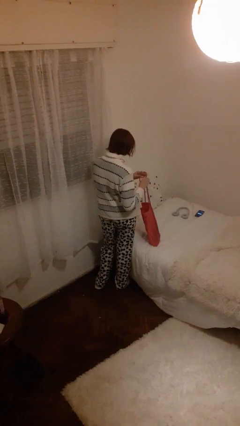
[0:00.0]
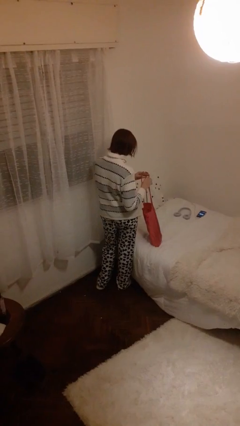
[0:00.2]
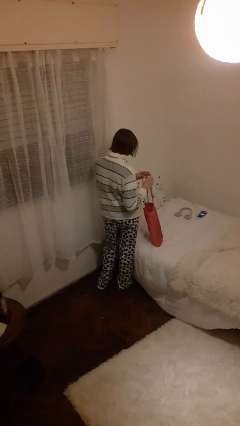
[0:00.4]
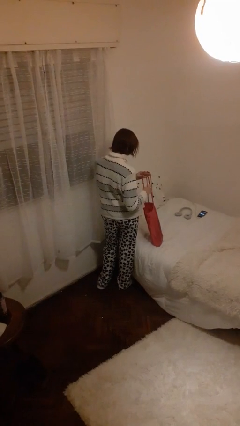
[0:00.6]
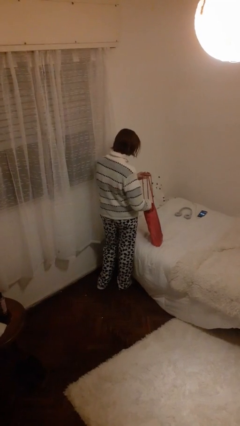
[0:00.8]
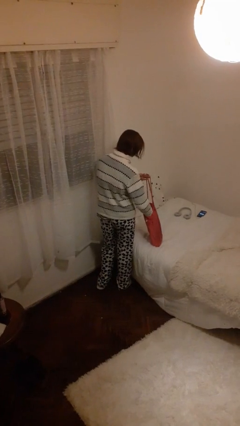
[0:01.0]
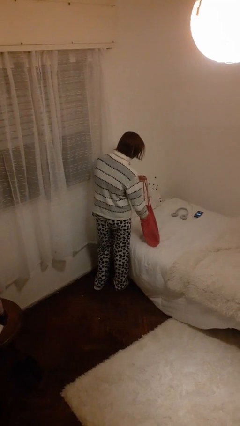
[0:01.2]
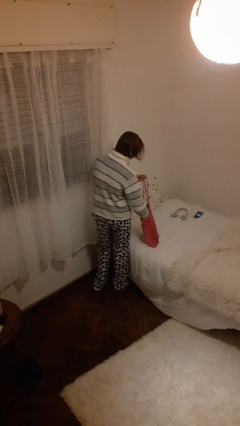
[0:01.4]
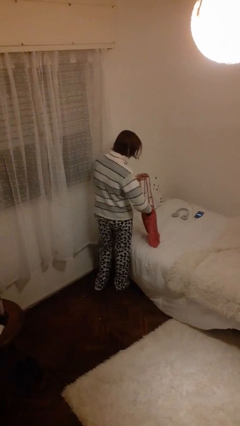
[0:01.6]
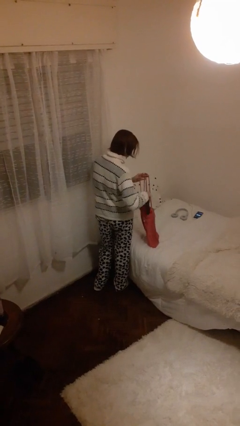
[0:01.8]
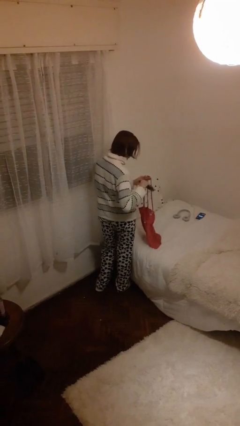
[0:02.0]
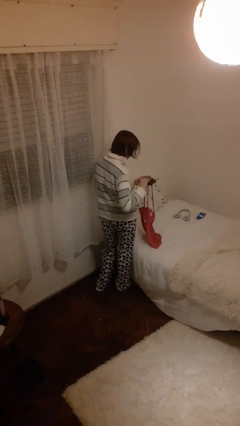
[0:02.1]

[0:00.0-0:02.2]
person takes object from bag

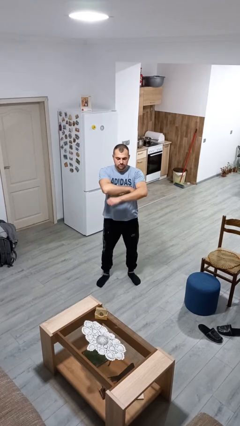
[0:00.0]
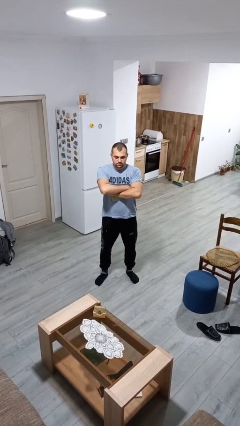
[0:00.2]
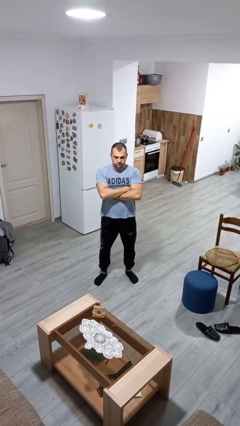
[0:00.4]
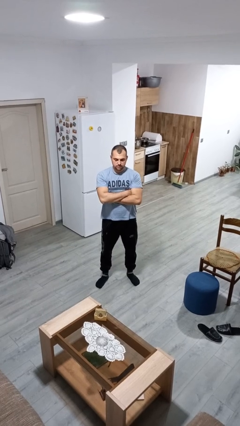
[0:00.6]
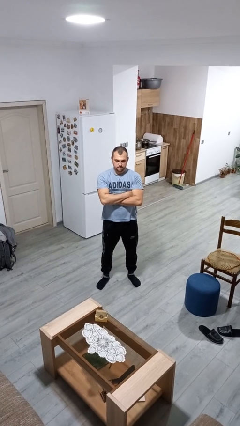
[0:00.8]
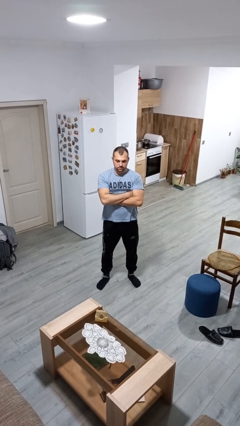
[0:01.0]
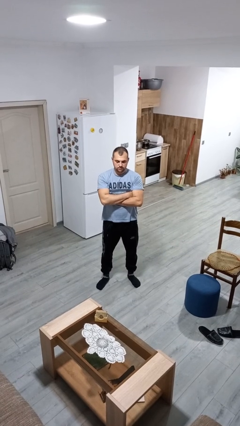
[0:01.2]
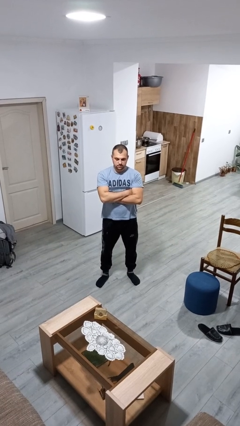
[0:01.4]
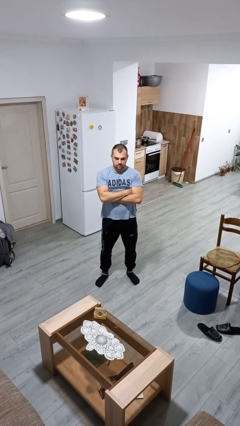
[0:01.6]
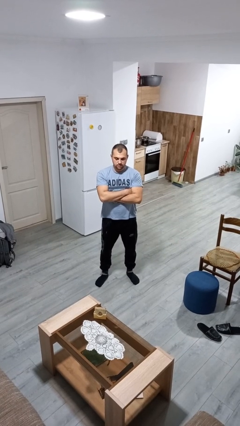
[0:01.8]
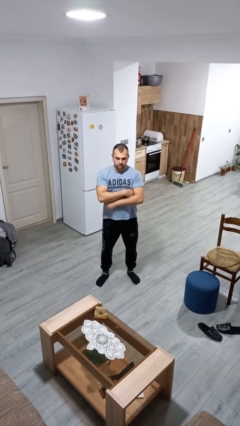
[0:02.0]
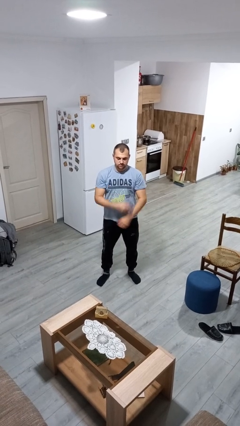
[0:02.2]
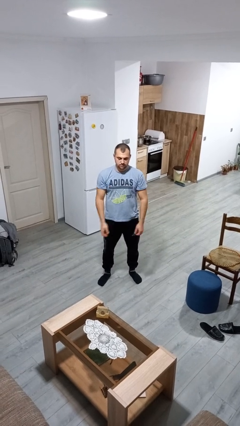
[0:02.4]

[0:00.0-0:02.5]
person crosses arms

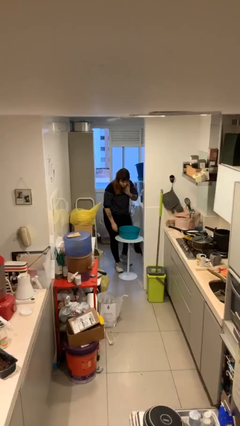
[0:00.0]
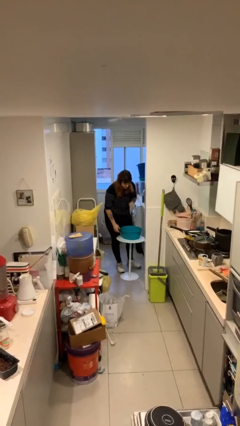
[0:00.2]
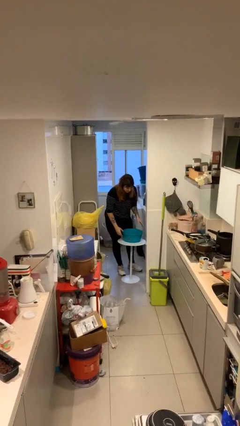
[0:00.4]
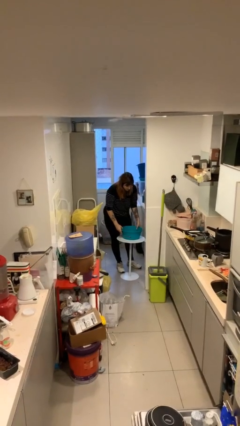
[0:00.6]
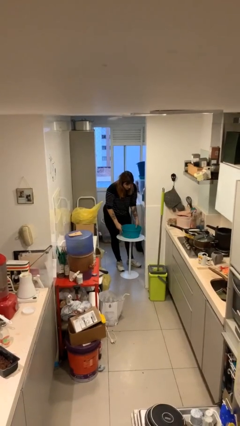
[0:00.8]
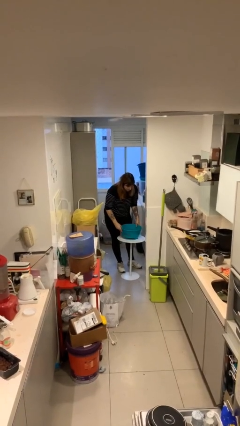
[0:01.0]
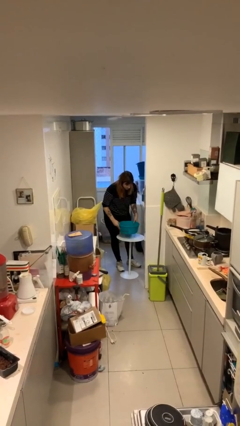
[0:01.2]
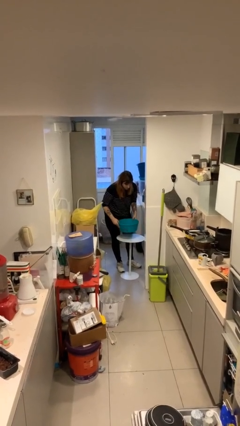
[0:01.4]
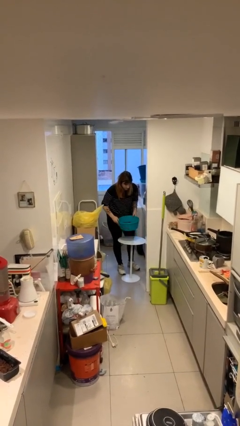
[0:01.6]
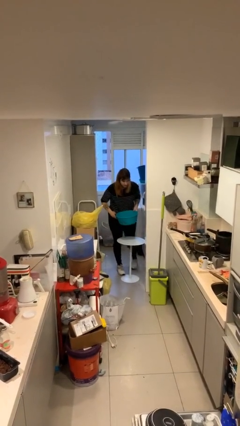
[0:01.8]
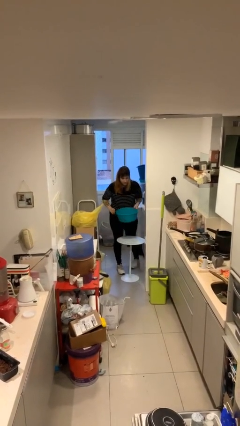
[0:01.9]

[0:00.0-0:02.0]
person picks up object from table

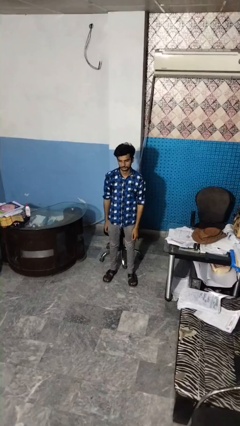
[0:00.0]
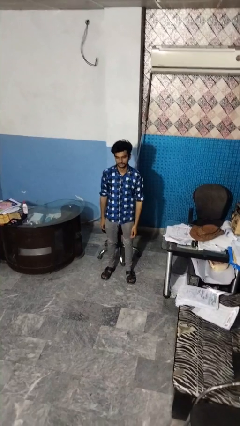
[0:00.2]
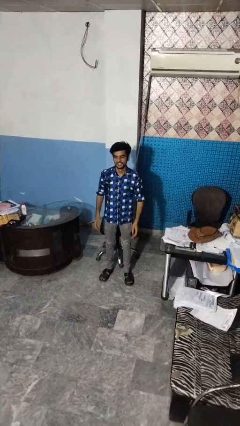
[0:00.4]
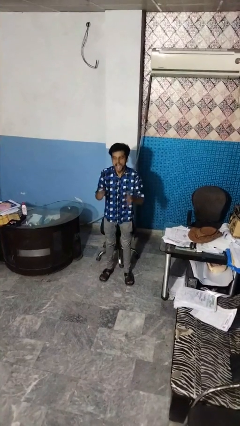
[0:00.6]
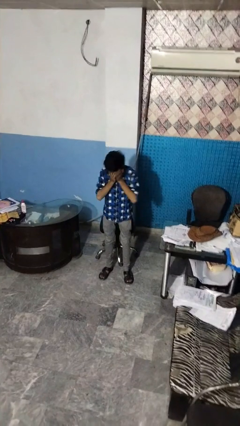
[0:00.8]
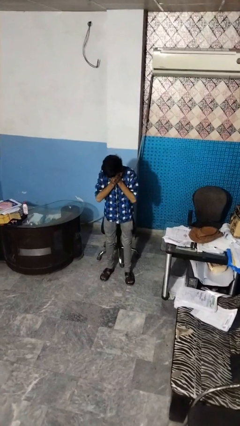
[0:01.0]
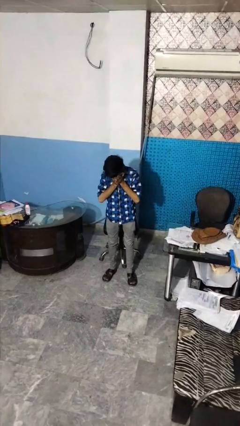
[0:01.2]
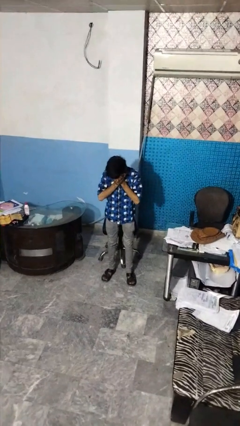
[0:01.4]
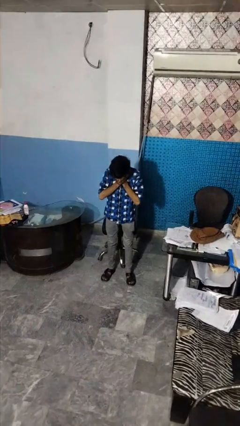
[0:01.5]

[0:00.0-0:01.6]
person sneezes into hand

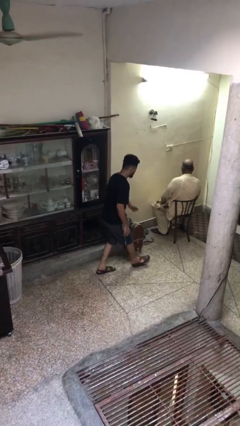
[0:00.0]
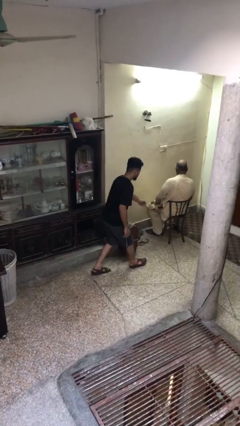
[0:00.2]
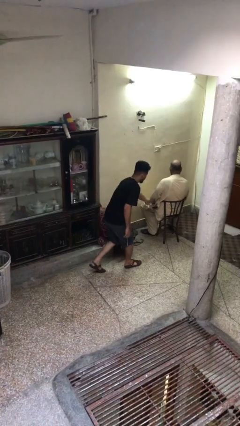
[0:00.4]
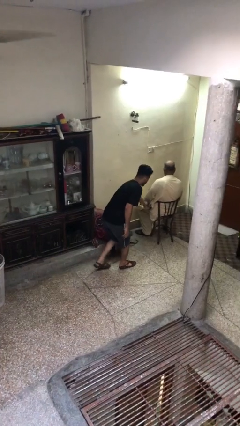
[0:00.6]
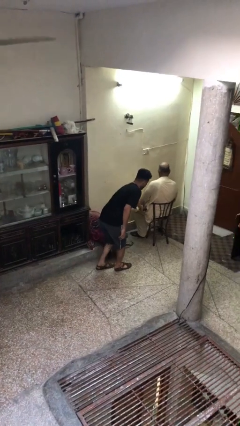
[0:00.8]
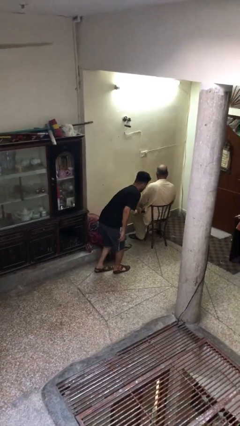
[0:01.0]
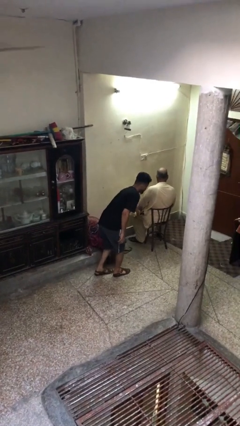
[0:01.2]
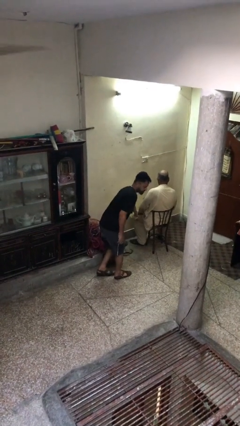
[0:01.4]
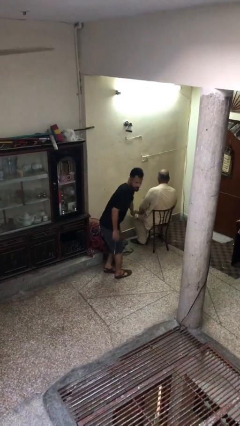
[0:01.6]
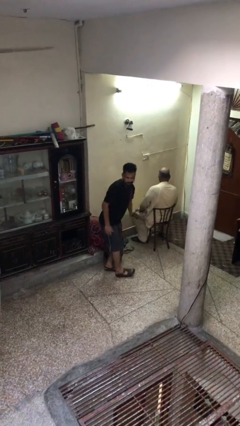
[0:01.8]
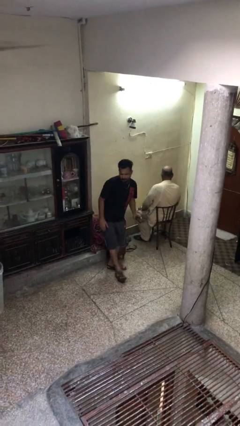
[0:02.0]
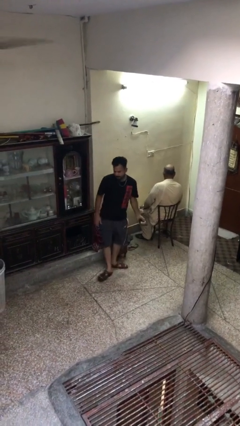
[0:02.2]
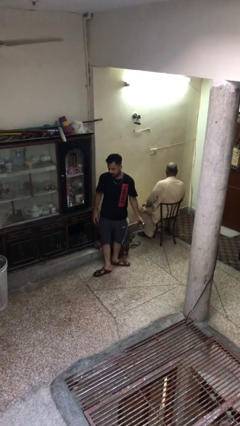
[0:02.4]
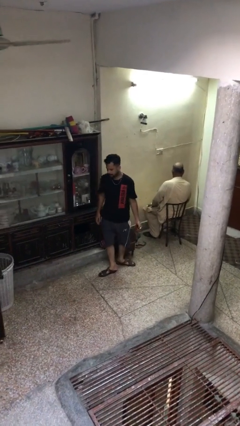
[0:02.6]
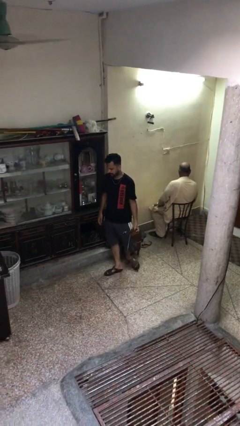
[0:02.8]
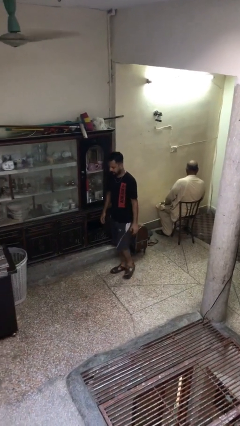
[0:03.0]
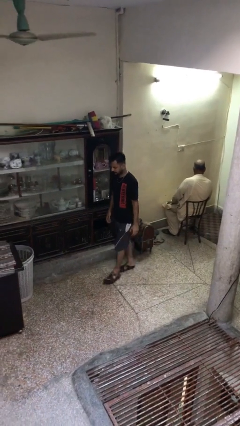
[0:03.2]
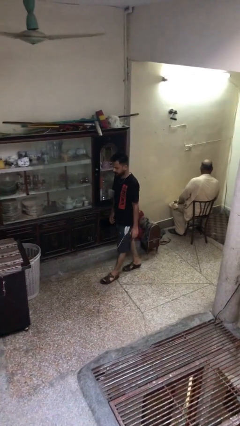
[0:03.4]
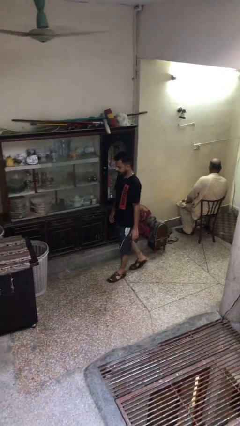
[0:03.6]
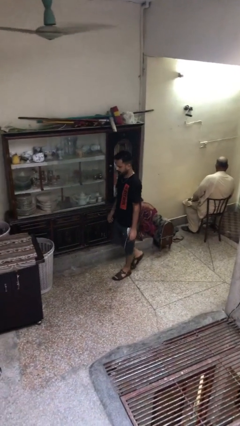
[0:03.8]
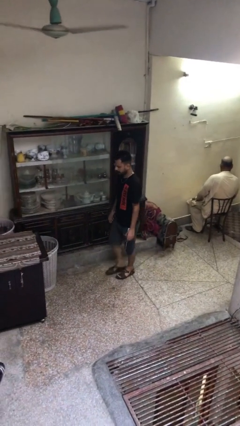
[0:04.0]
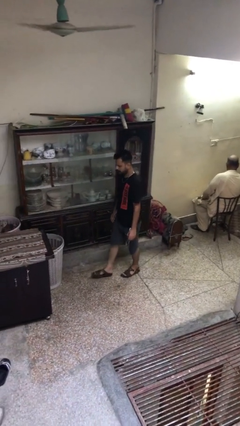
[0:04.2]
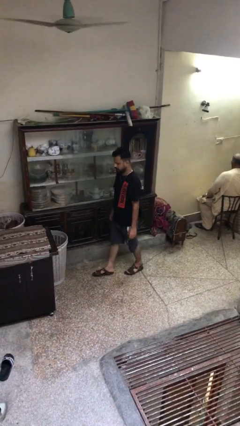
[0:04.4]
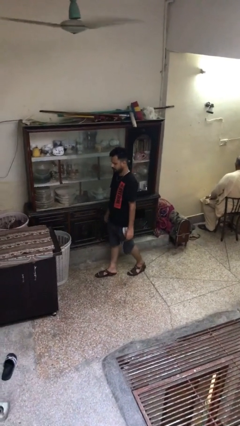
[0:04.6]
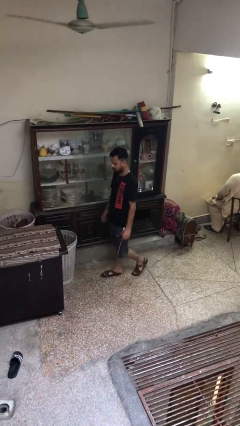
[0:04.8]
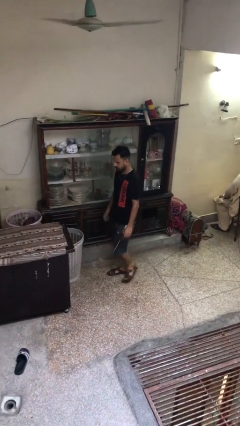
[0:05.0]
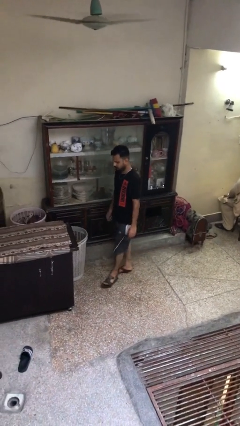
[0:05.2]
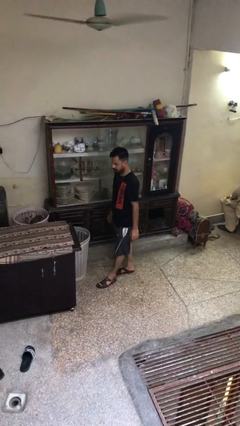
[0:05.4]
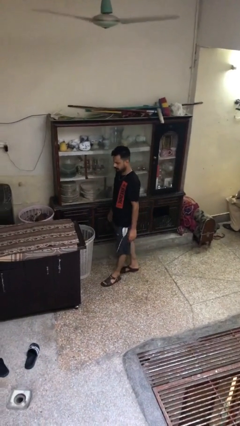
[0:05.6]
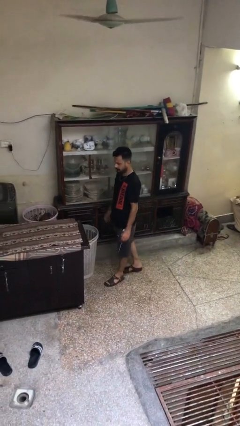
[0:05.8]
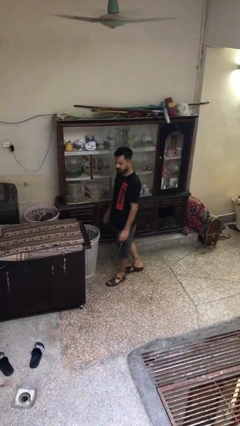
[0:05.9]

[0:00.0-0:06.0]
person steals object from person

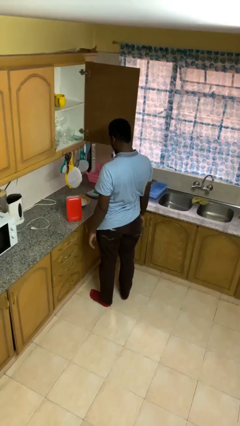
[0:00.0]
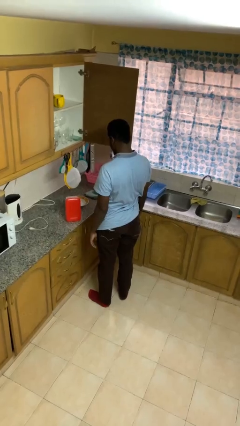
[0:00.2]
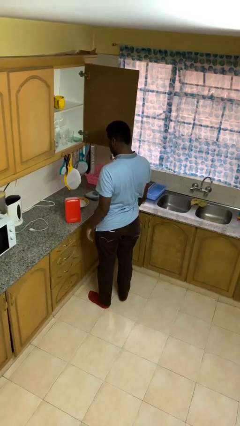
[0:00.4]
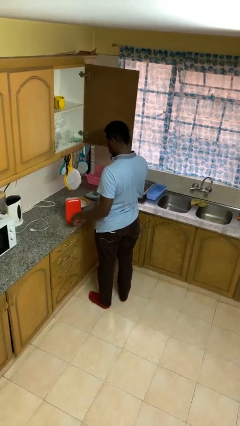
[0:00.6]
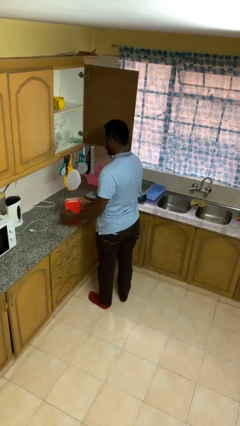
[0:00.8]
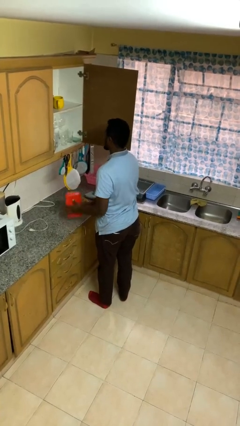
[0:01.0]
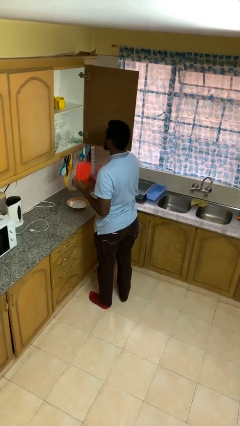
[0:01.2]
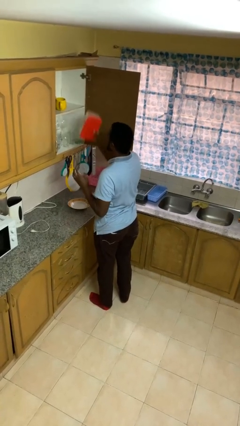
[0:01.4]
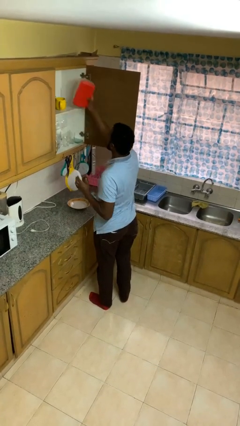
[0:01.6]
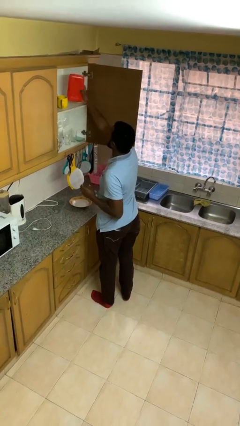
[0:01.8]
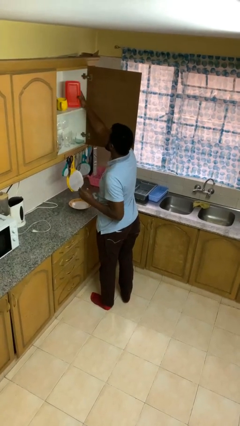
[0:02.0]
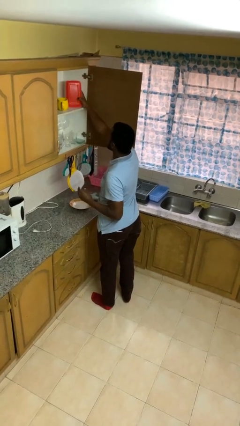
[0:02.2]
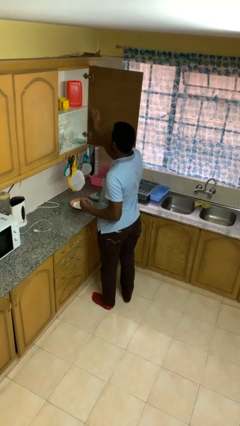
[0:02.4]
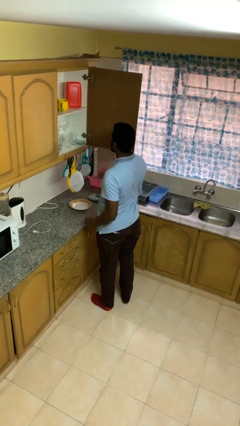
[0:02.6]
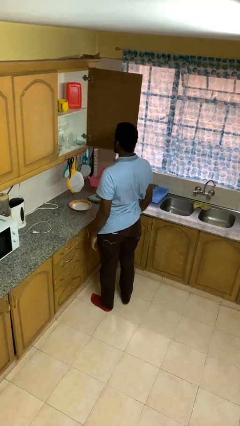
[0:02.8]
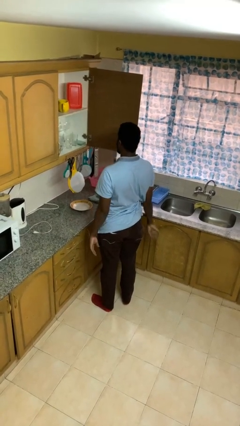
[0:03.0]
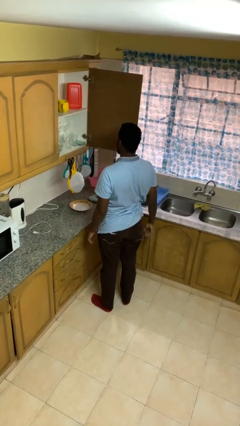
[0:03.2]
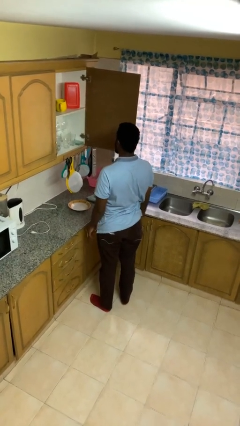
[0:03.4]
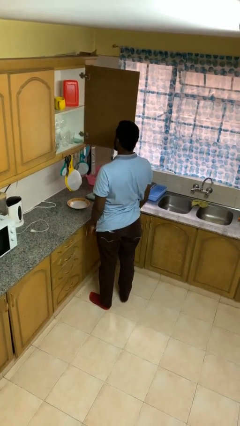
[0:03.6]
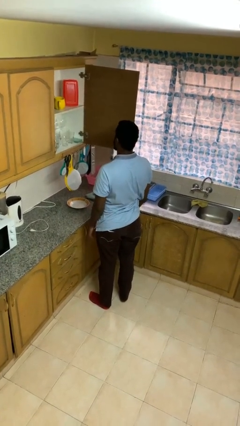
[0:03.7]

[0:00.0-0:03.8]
person puts object in cabinet
